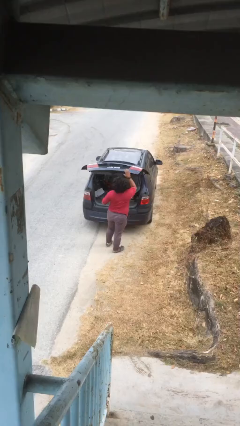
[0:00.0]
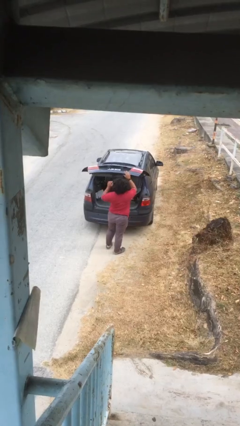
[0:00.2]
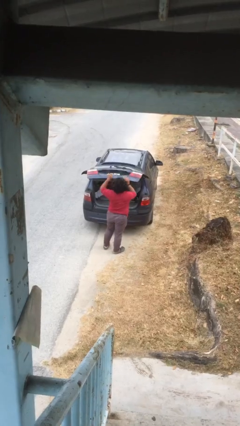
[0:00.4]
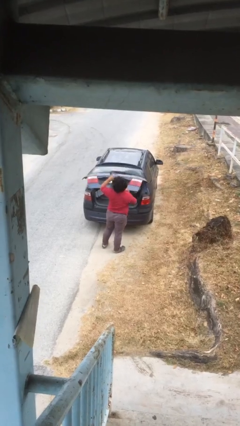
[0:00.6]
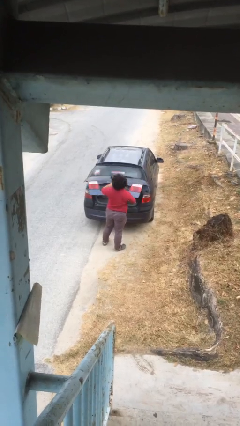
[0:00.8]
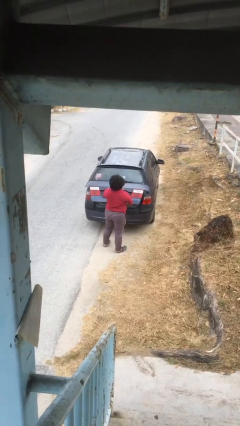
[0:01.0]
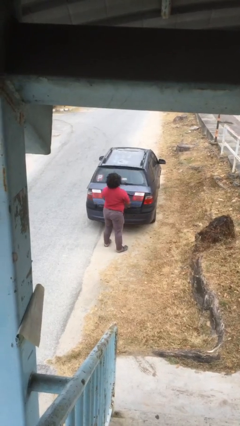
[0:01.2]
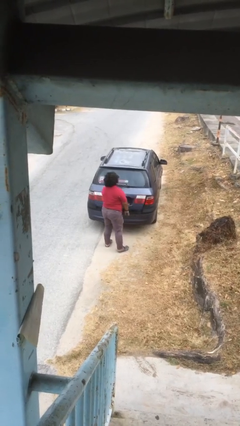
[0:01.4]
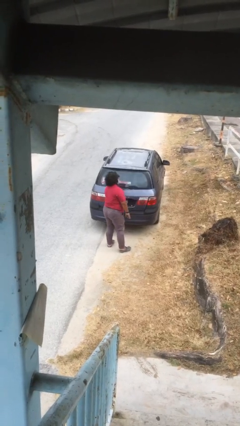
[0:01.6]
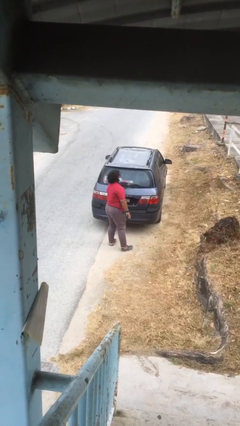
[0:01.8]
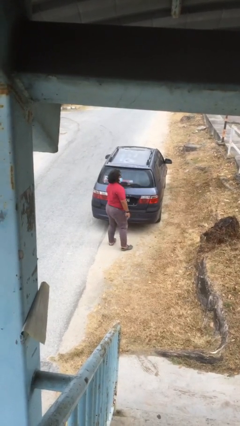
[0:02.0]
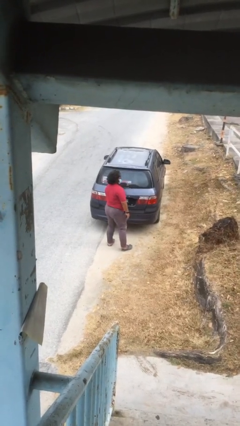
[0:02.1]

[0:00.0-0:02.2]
person closes car trunk

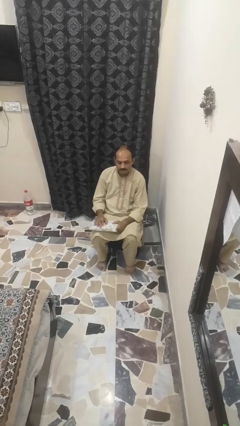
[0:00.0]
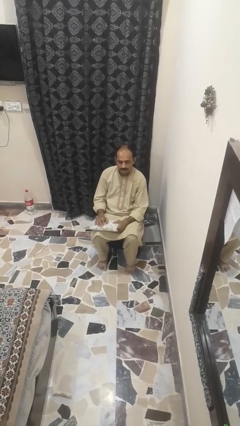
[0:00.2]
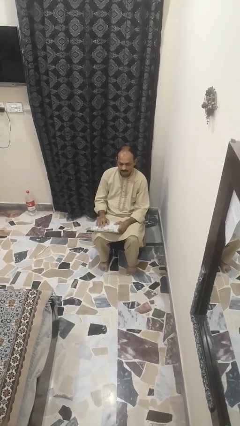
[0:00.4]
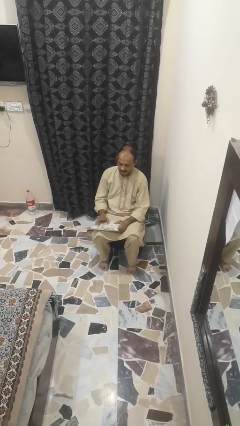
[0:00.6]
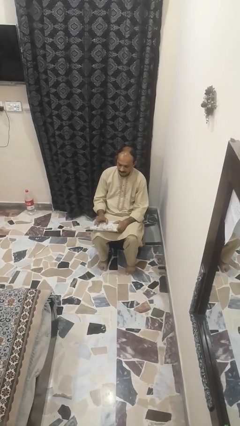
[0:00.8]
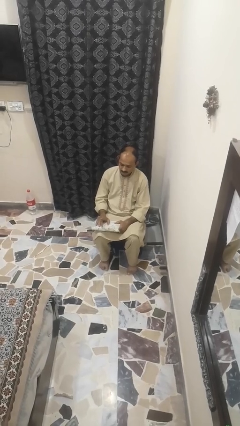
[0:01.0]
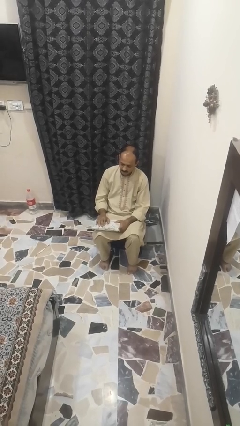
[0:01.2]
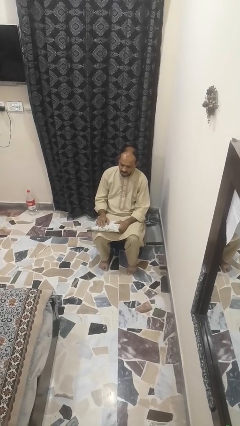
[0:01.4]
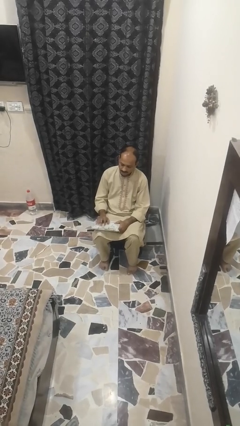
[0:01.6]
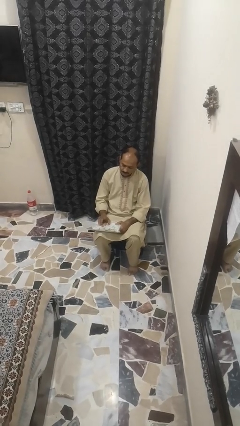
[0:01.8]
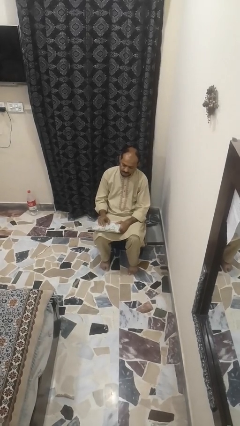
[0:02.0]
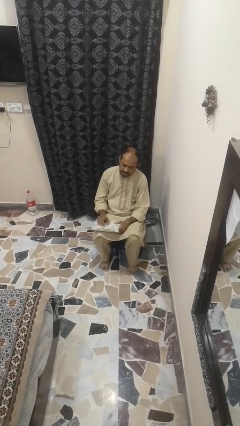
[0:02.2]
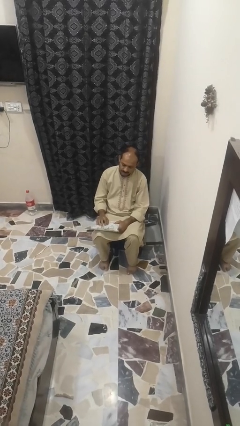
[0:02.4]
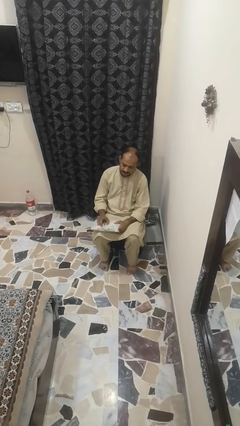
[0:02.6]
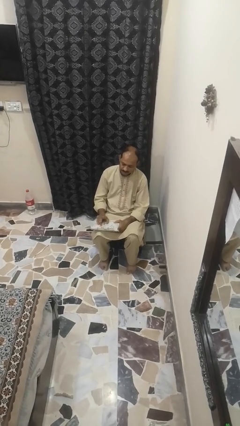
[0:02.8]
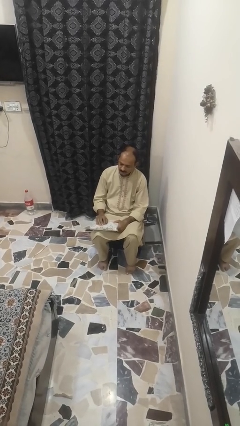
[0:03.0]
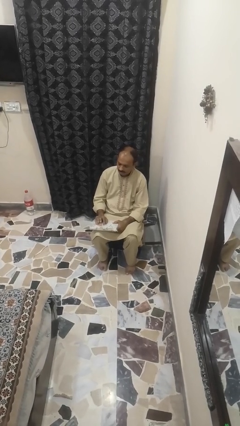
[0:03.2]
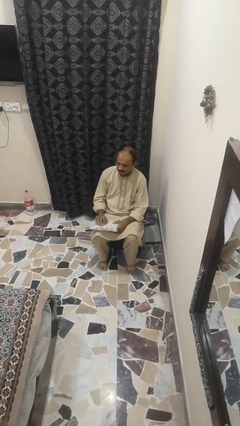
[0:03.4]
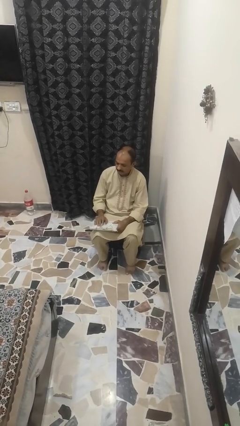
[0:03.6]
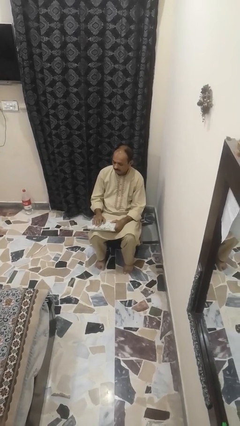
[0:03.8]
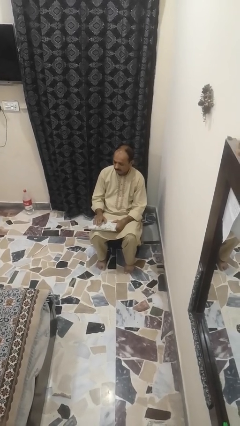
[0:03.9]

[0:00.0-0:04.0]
person taps object with finger

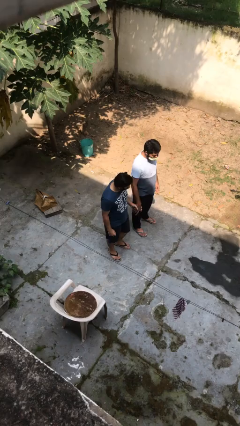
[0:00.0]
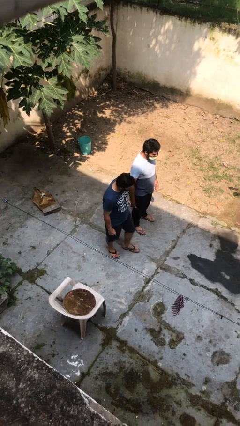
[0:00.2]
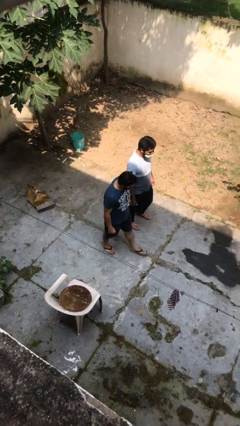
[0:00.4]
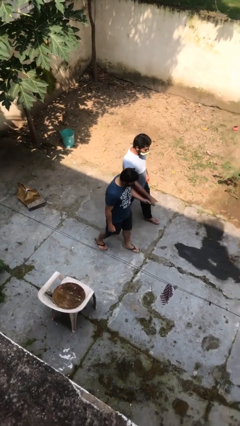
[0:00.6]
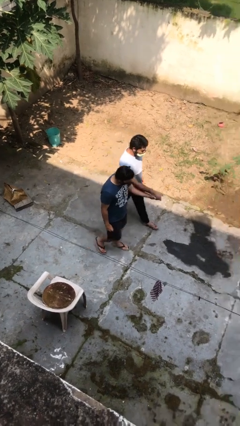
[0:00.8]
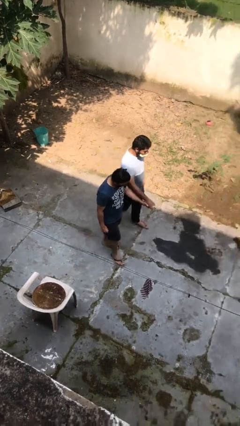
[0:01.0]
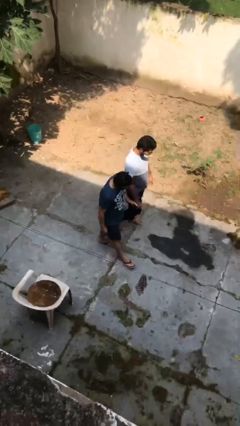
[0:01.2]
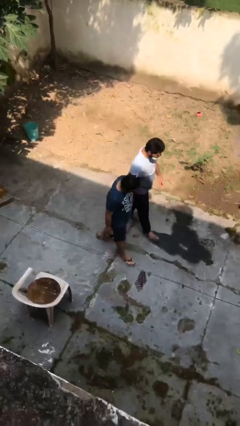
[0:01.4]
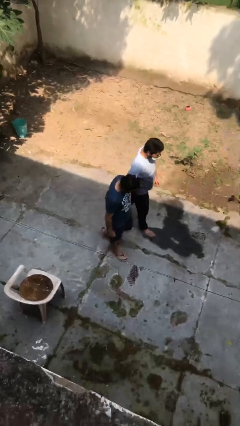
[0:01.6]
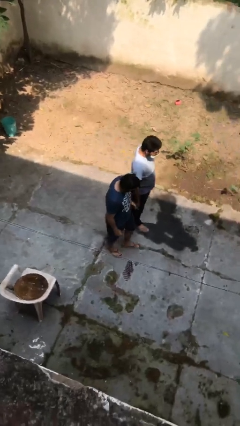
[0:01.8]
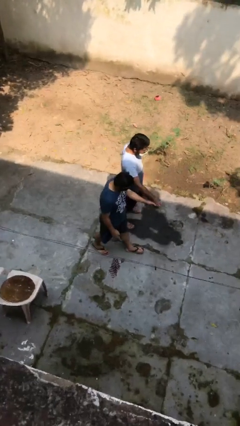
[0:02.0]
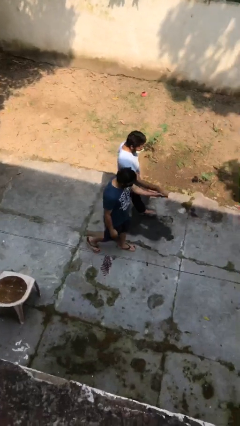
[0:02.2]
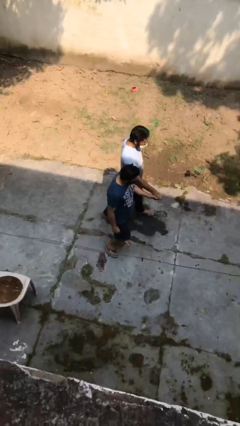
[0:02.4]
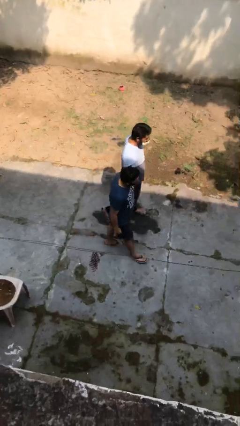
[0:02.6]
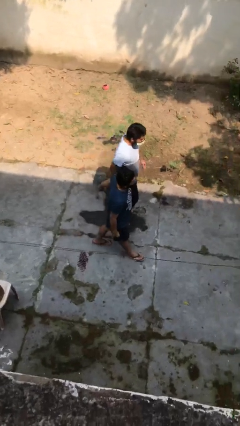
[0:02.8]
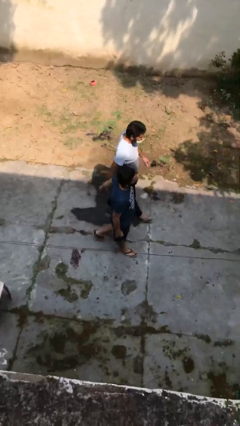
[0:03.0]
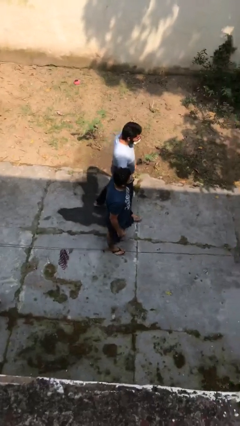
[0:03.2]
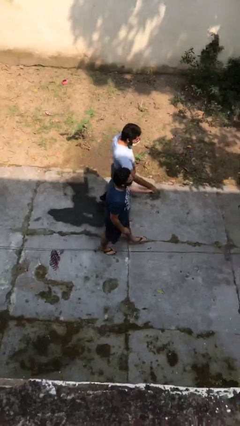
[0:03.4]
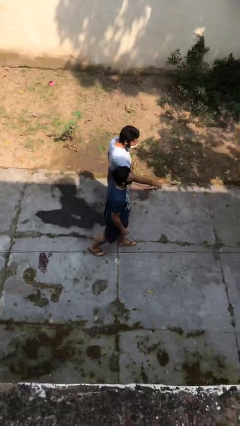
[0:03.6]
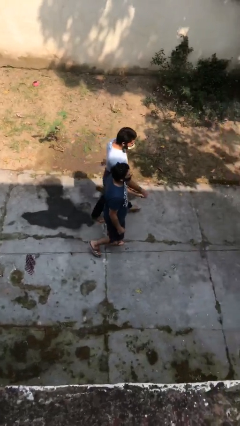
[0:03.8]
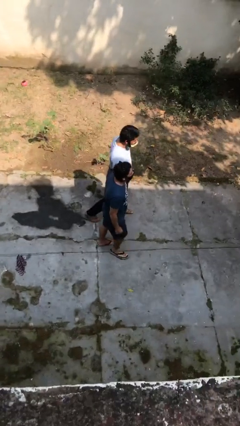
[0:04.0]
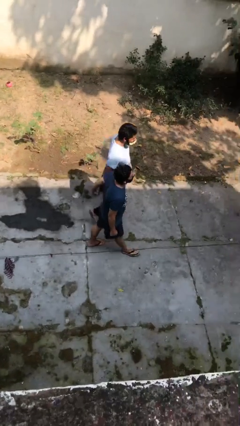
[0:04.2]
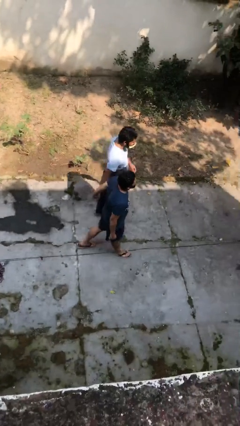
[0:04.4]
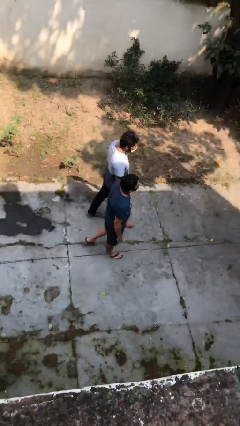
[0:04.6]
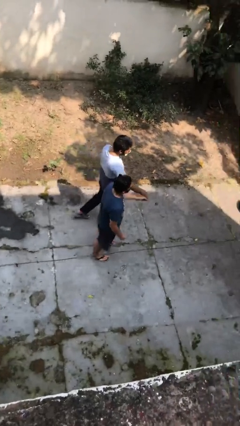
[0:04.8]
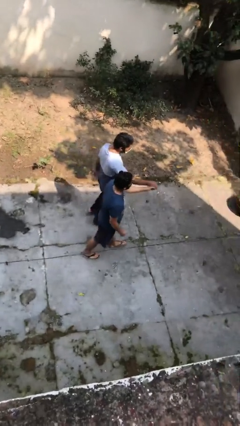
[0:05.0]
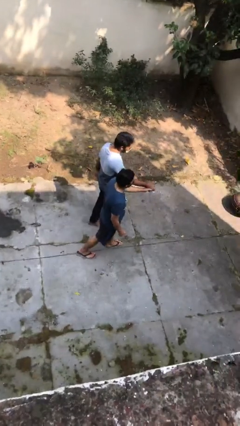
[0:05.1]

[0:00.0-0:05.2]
person holds hand

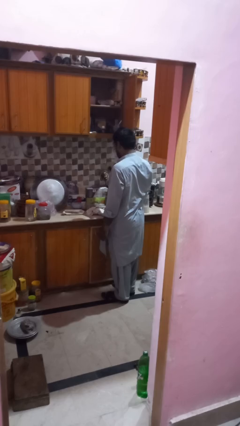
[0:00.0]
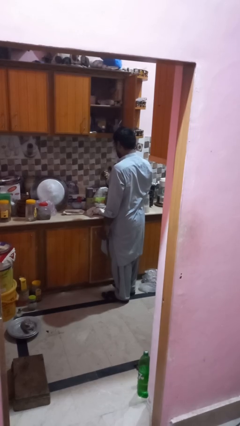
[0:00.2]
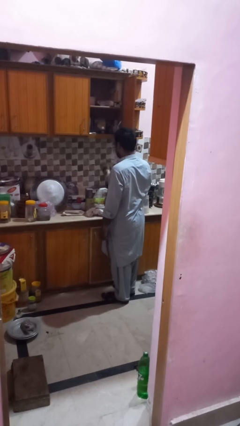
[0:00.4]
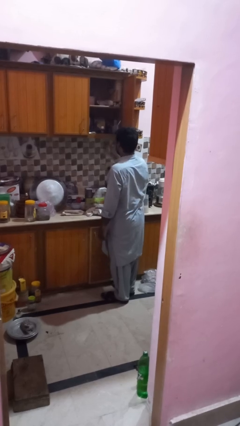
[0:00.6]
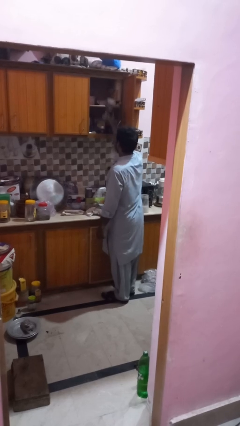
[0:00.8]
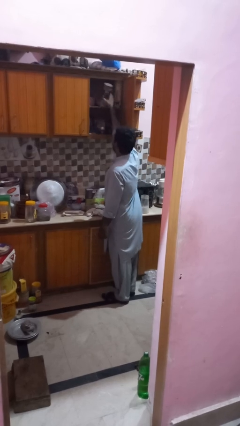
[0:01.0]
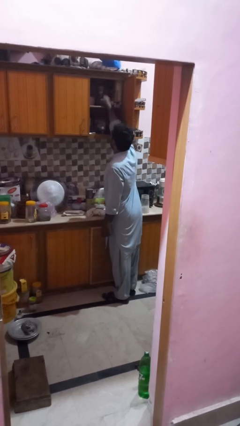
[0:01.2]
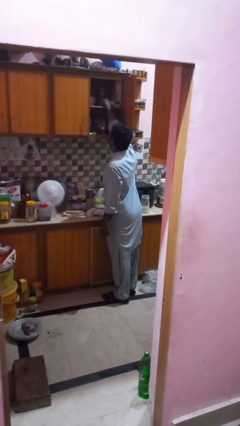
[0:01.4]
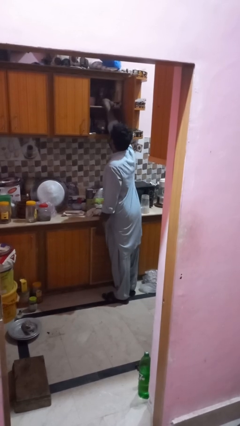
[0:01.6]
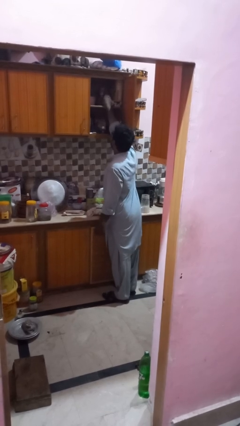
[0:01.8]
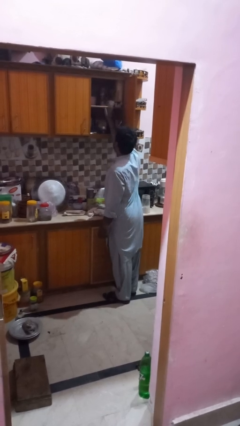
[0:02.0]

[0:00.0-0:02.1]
person puts object in cabinet

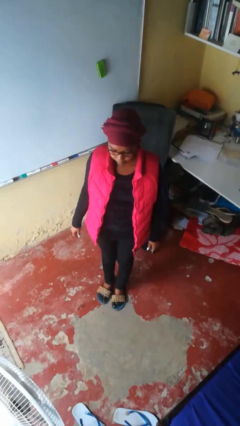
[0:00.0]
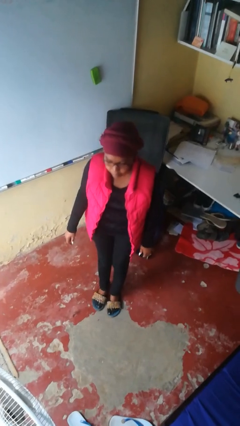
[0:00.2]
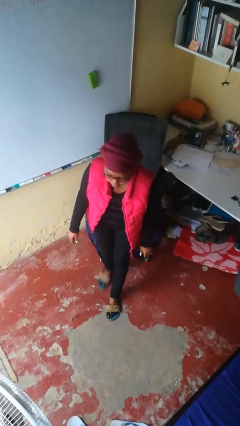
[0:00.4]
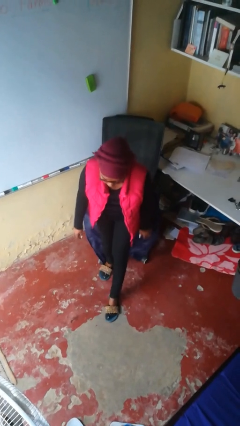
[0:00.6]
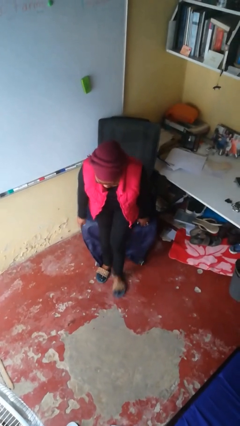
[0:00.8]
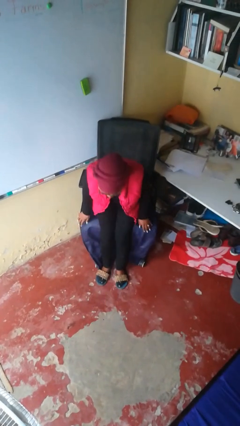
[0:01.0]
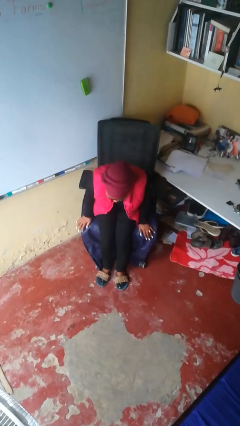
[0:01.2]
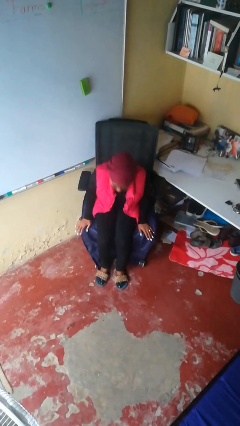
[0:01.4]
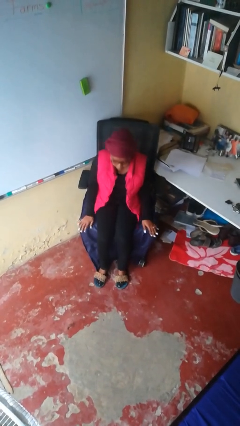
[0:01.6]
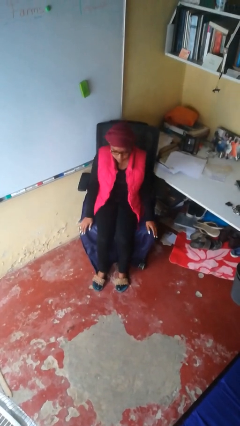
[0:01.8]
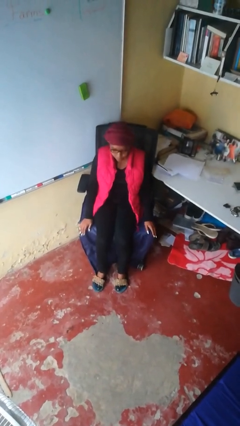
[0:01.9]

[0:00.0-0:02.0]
person sits down

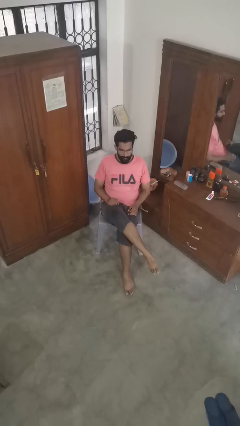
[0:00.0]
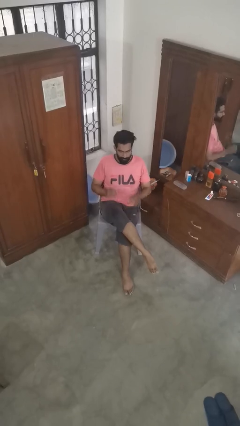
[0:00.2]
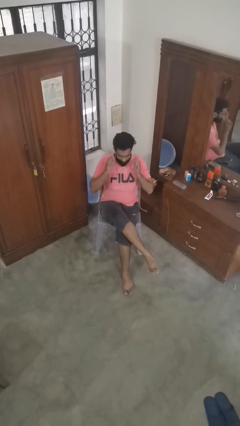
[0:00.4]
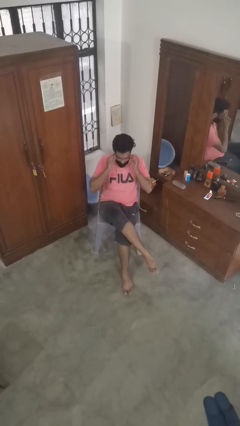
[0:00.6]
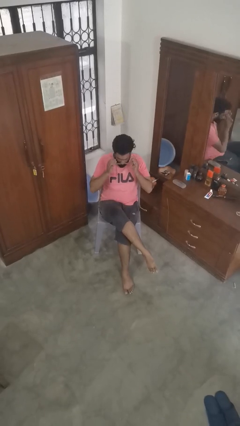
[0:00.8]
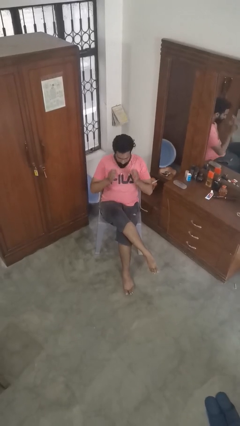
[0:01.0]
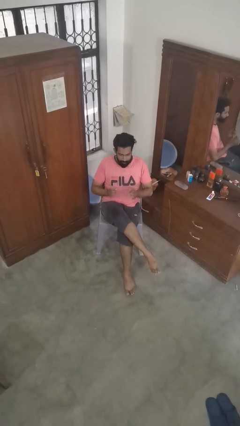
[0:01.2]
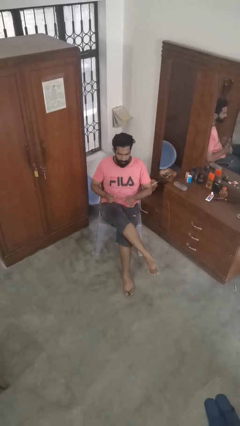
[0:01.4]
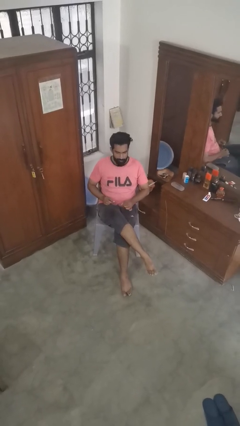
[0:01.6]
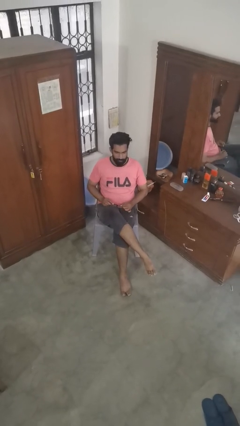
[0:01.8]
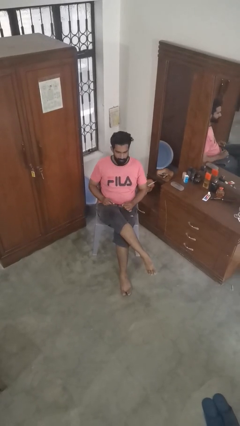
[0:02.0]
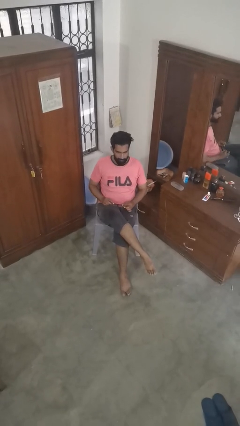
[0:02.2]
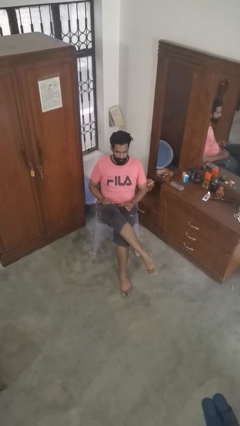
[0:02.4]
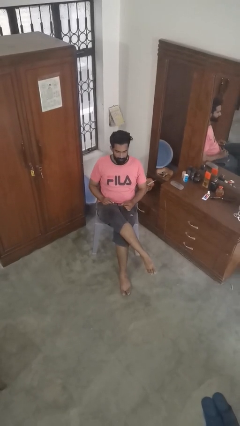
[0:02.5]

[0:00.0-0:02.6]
person takes off glasses
